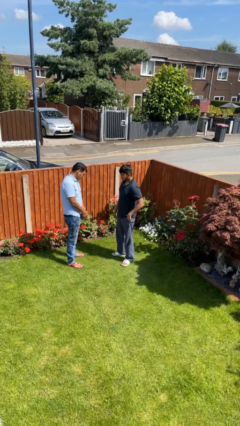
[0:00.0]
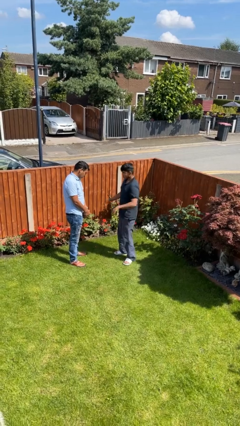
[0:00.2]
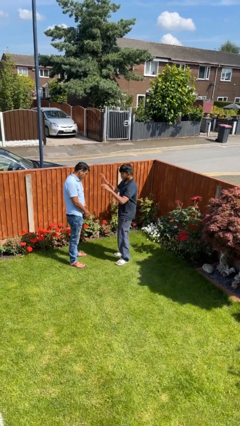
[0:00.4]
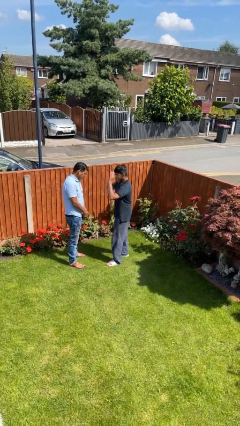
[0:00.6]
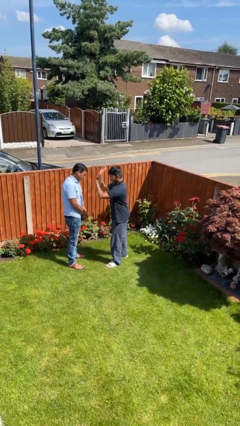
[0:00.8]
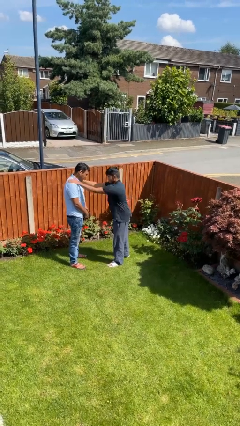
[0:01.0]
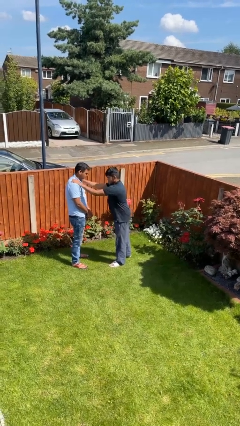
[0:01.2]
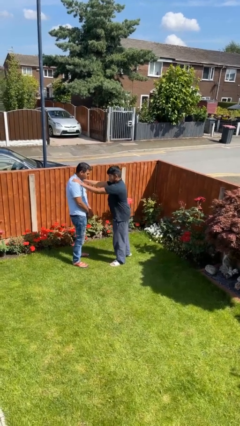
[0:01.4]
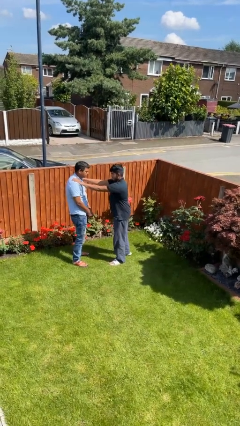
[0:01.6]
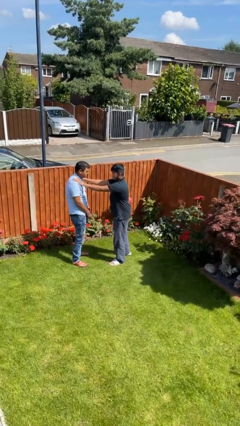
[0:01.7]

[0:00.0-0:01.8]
person pounds shoulders of person

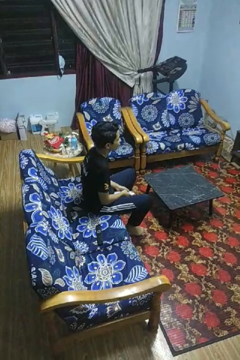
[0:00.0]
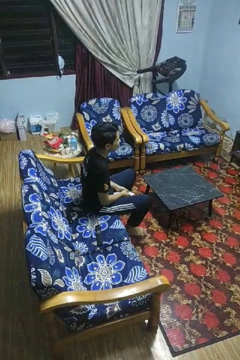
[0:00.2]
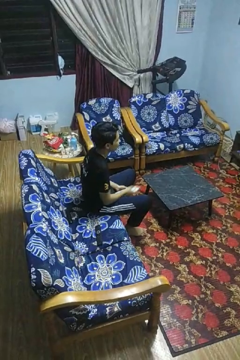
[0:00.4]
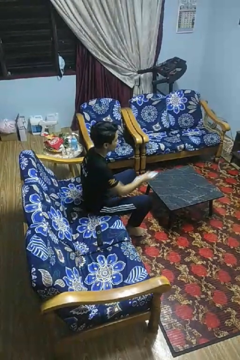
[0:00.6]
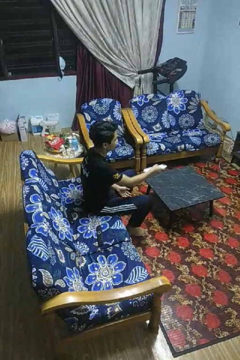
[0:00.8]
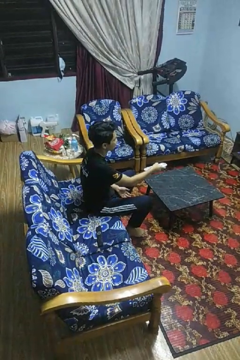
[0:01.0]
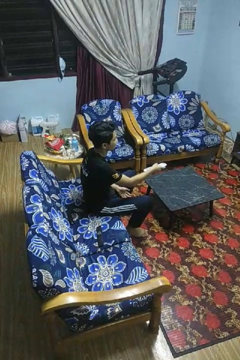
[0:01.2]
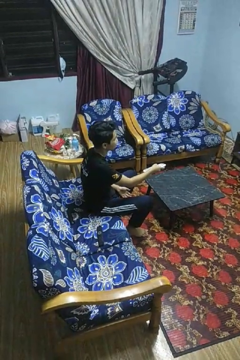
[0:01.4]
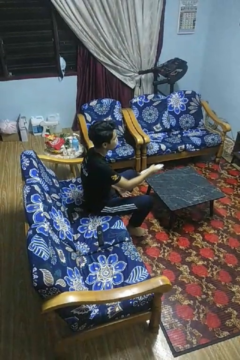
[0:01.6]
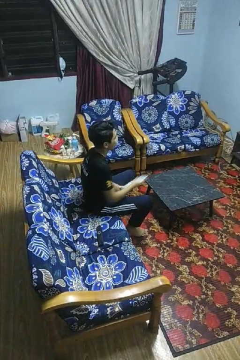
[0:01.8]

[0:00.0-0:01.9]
person uses television remote

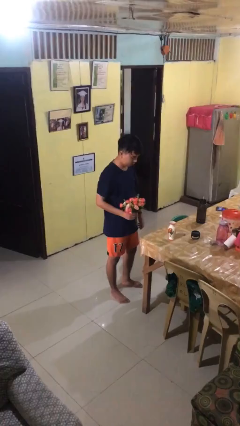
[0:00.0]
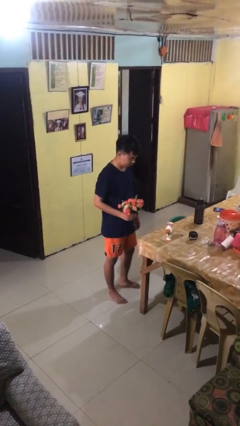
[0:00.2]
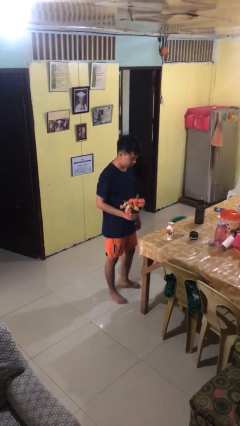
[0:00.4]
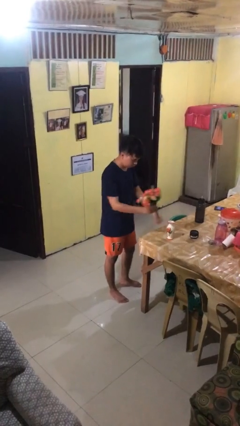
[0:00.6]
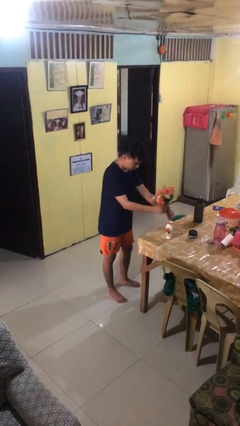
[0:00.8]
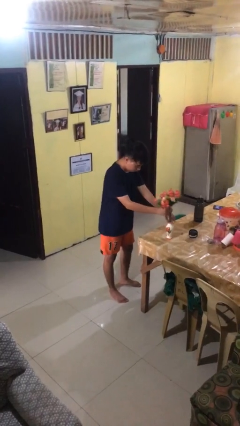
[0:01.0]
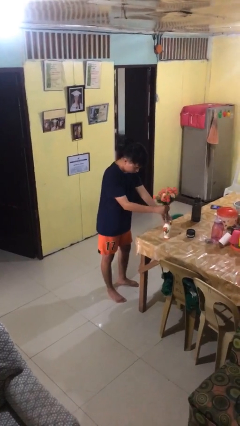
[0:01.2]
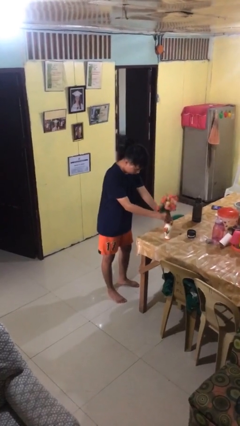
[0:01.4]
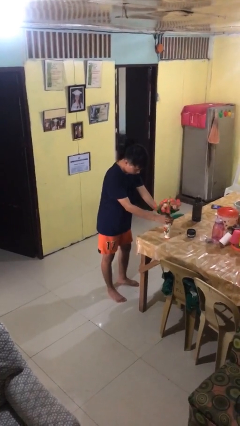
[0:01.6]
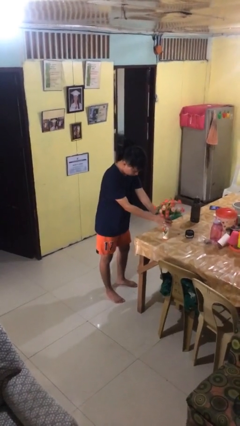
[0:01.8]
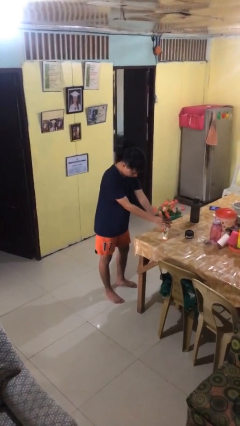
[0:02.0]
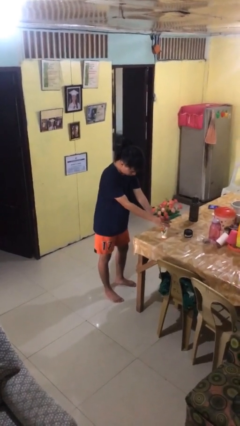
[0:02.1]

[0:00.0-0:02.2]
person arranges flowers in vase

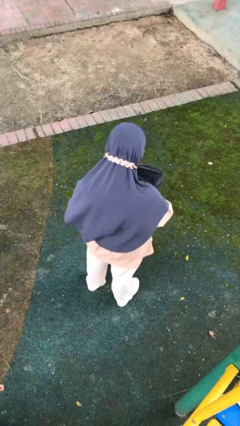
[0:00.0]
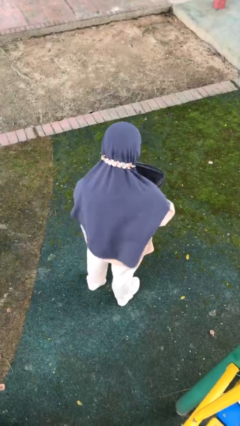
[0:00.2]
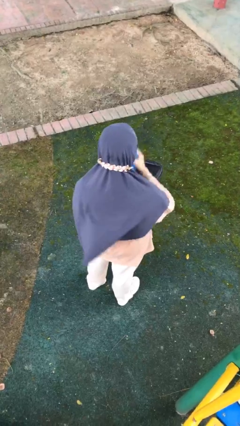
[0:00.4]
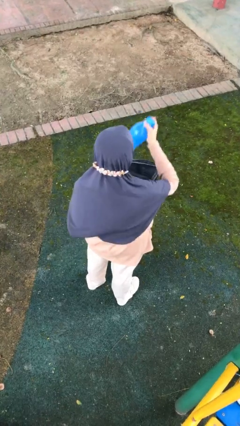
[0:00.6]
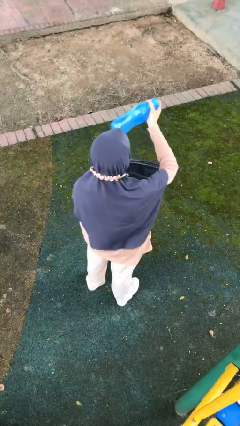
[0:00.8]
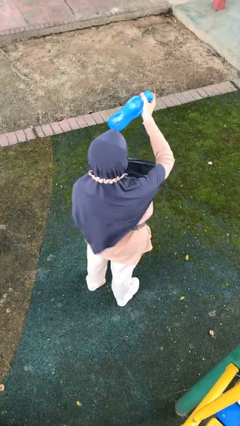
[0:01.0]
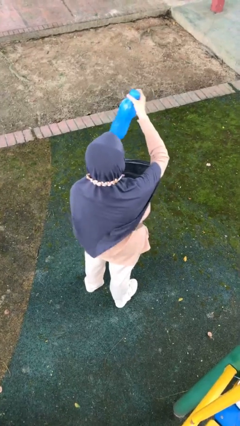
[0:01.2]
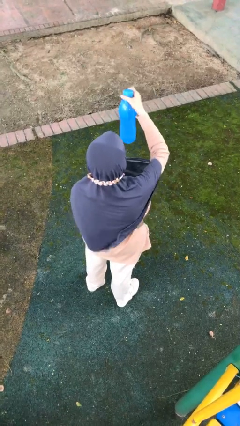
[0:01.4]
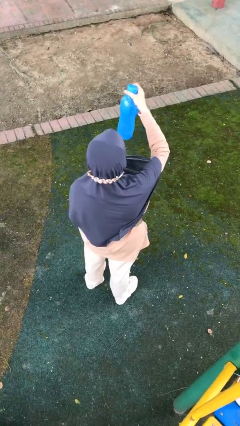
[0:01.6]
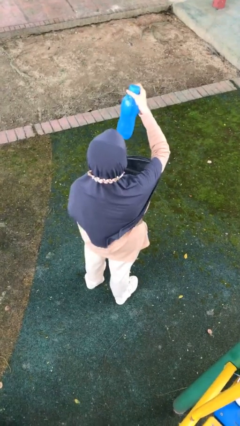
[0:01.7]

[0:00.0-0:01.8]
person takes object from backpack

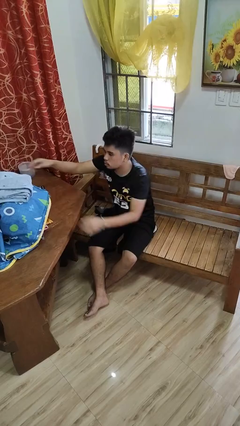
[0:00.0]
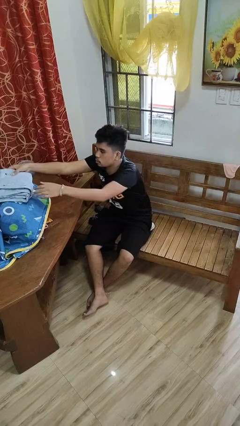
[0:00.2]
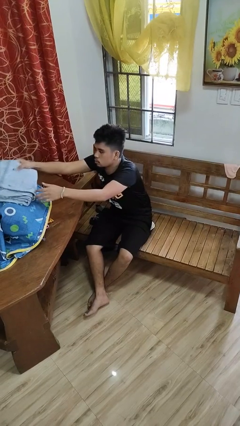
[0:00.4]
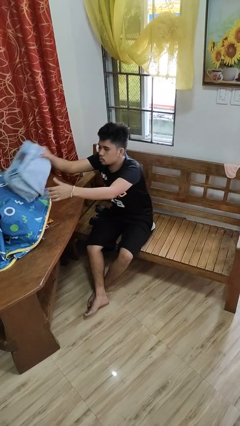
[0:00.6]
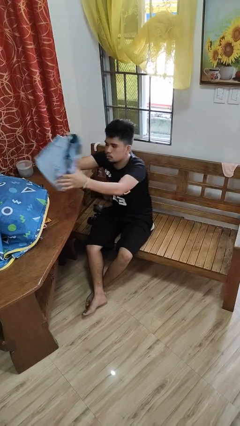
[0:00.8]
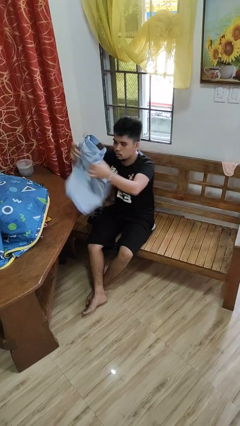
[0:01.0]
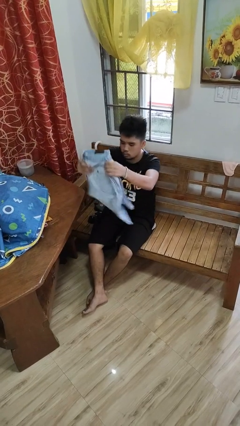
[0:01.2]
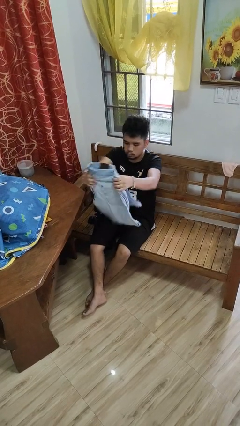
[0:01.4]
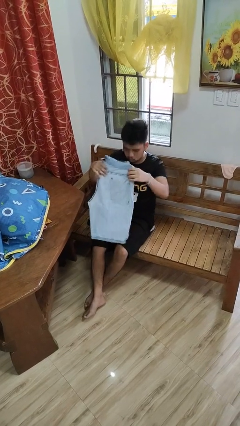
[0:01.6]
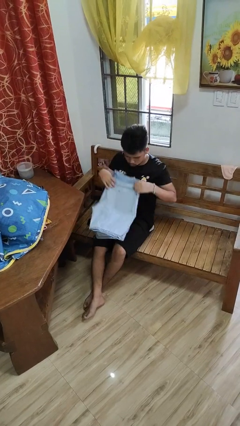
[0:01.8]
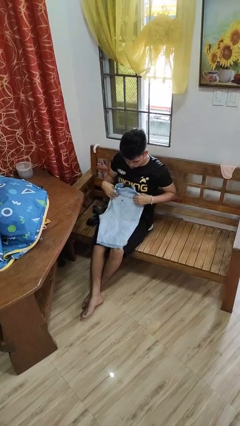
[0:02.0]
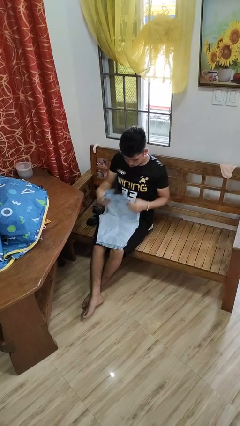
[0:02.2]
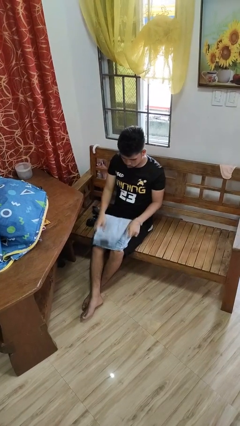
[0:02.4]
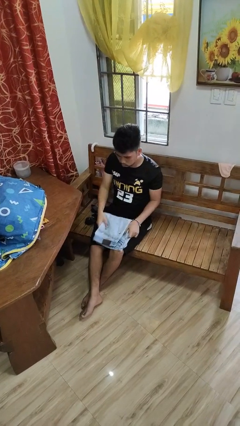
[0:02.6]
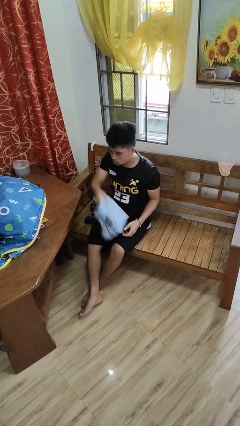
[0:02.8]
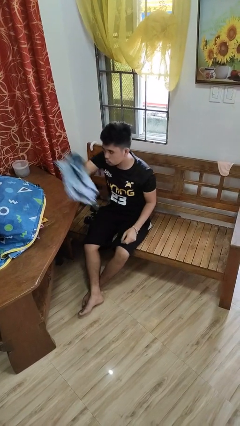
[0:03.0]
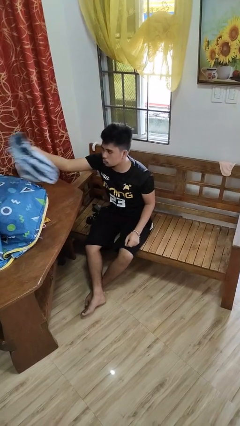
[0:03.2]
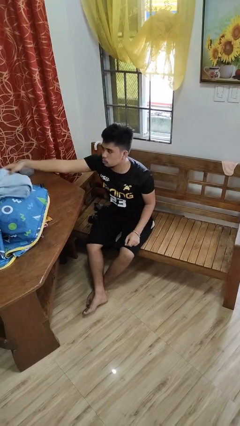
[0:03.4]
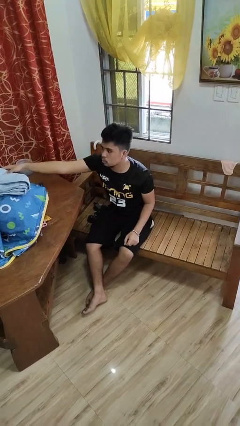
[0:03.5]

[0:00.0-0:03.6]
person folds pants

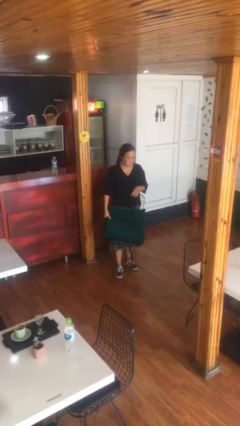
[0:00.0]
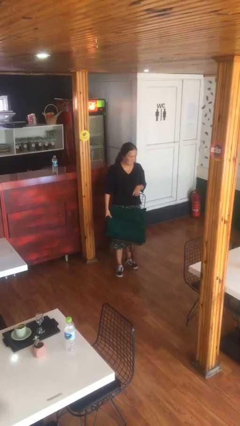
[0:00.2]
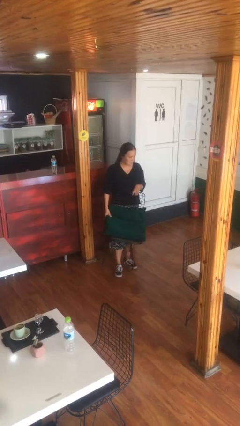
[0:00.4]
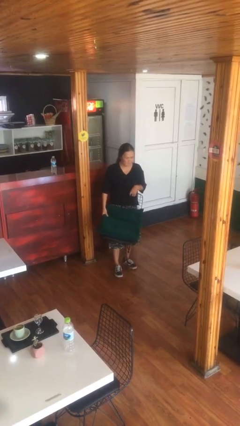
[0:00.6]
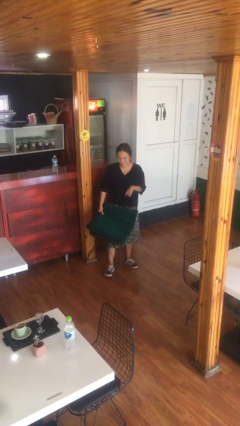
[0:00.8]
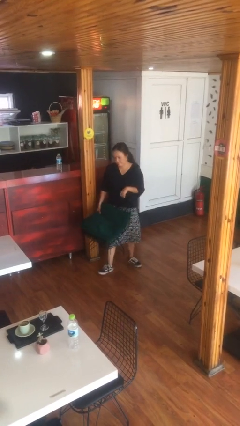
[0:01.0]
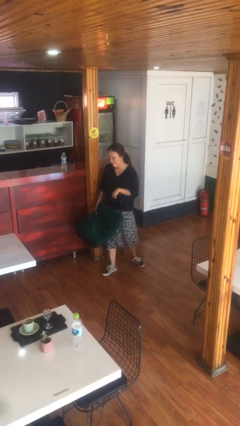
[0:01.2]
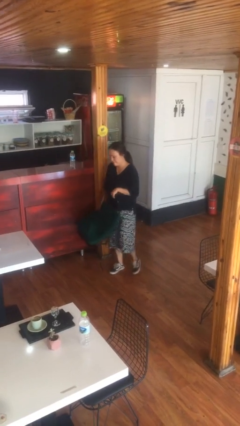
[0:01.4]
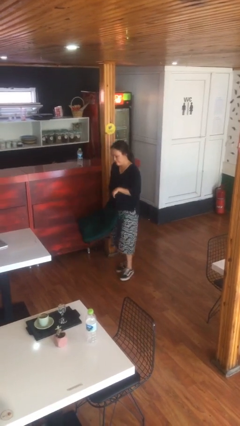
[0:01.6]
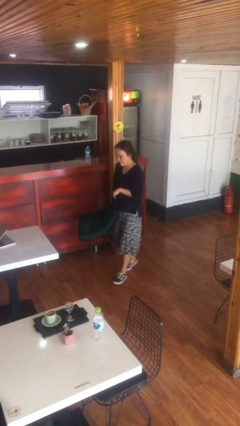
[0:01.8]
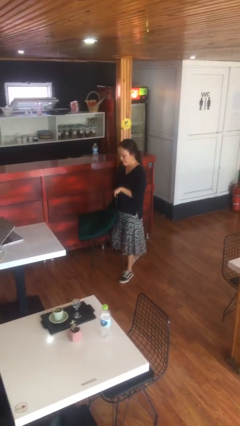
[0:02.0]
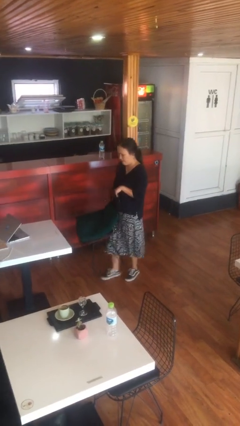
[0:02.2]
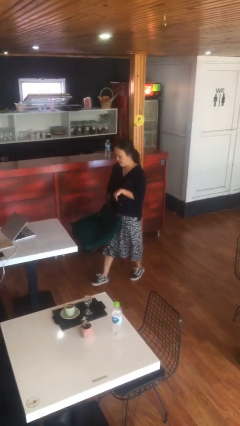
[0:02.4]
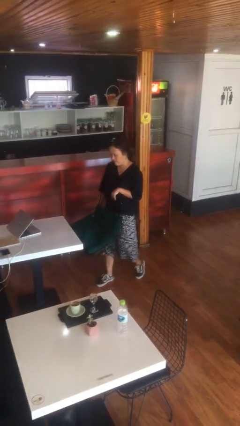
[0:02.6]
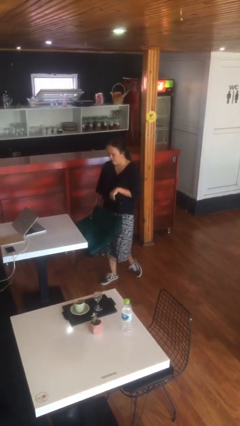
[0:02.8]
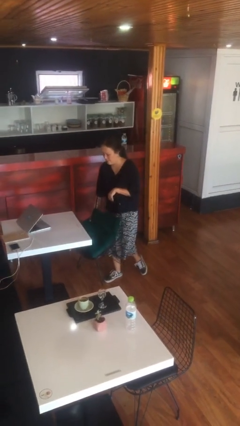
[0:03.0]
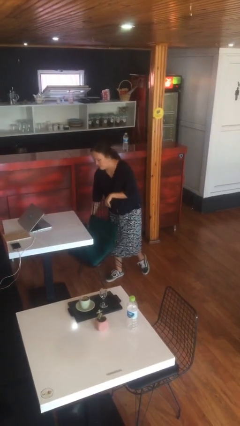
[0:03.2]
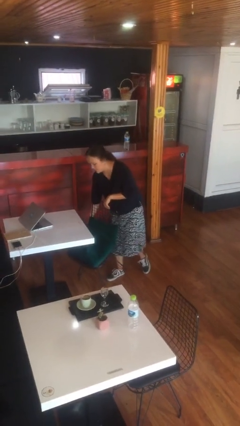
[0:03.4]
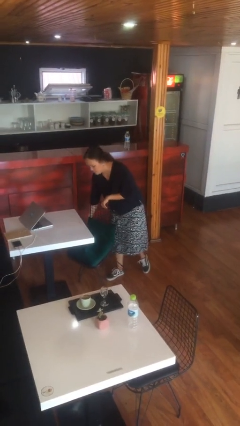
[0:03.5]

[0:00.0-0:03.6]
person carries heavy object

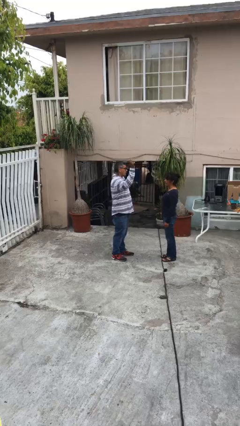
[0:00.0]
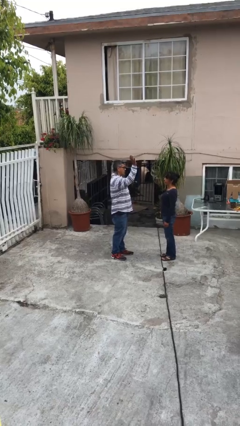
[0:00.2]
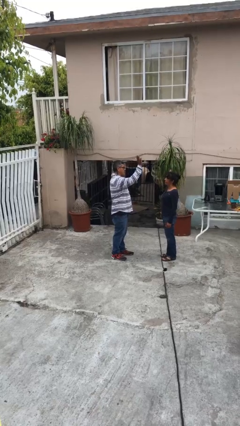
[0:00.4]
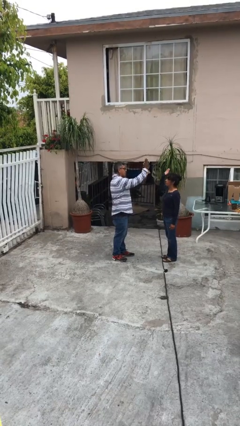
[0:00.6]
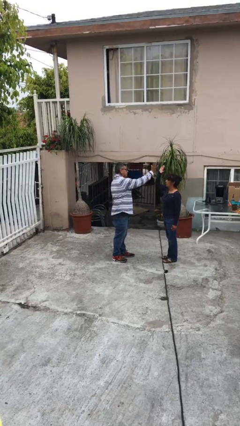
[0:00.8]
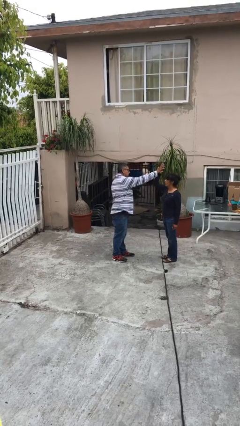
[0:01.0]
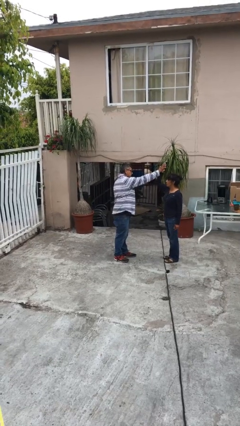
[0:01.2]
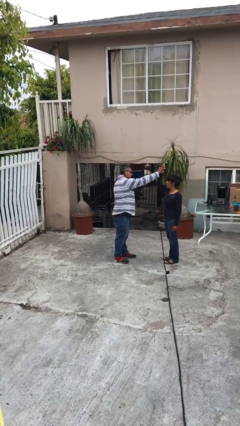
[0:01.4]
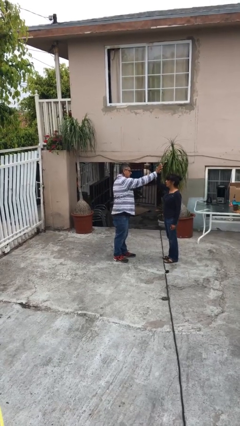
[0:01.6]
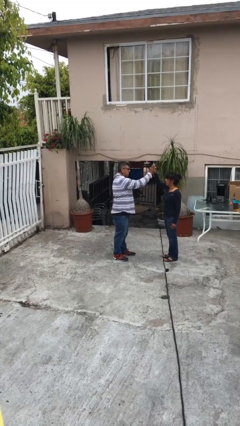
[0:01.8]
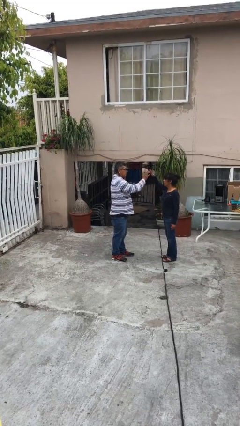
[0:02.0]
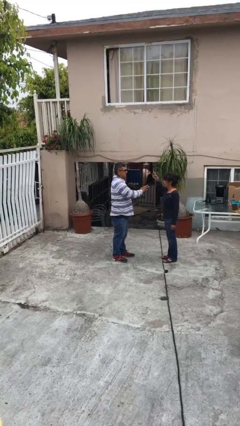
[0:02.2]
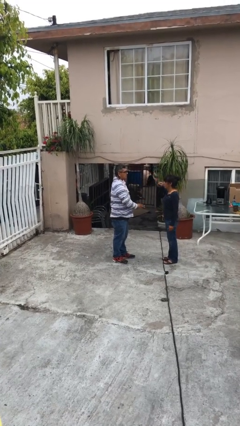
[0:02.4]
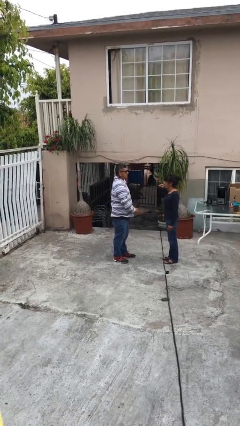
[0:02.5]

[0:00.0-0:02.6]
person highfives hand

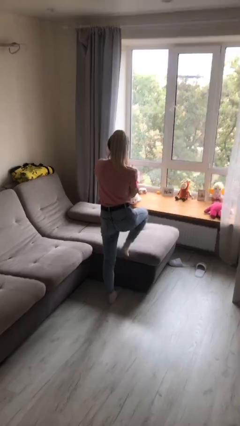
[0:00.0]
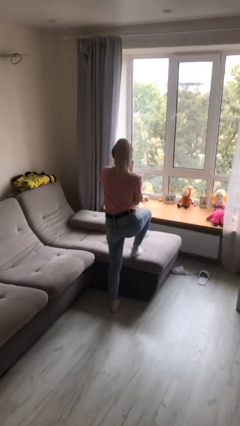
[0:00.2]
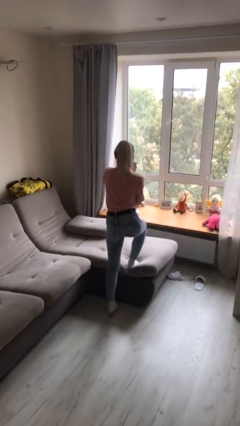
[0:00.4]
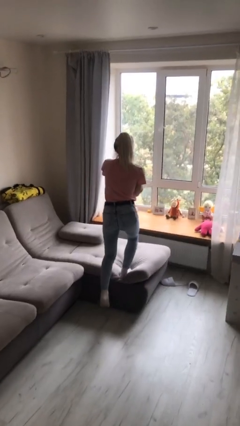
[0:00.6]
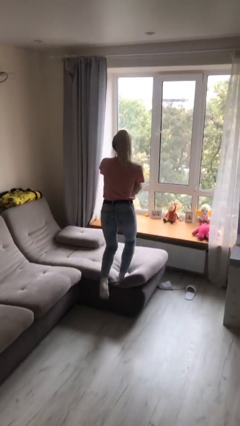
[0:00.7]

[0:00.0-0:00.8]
person climbs on couch
